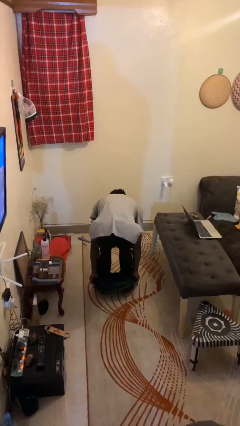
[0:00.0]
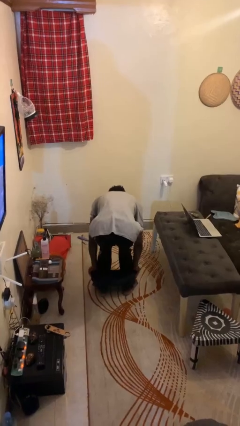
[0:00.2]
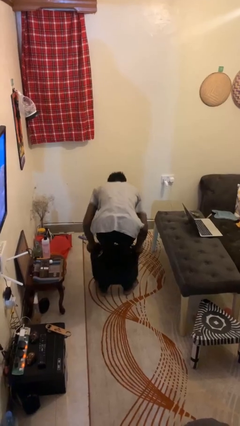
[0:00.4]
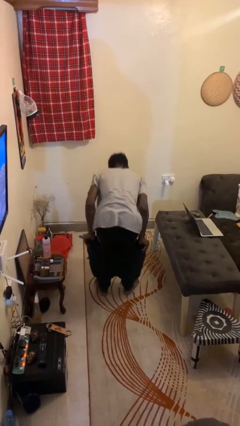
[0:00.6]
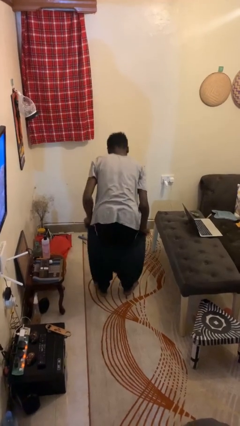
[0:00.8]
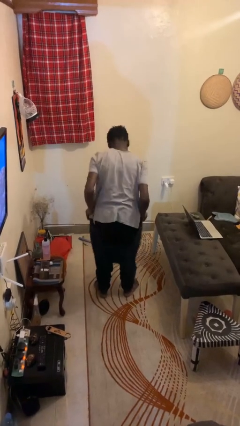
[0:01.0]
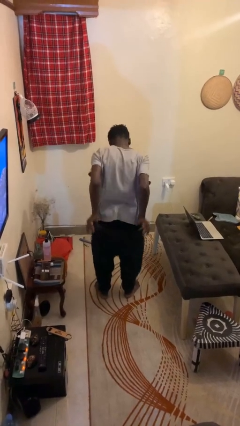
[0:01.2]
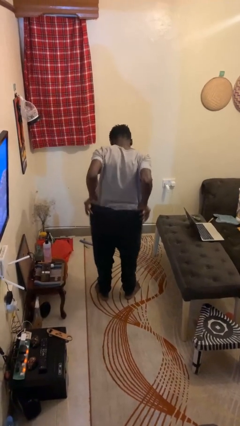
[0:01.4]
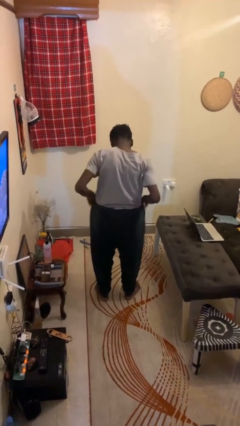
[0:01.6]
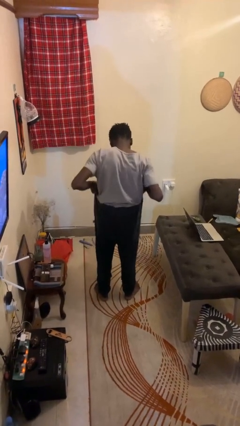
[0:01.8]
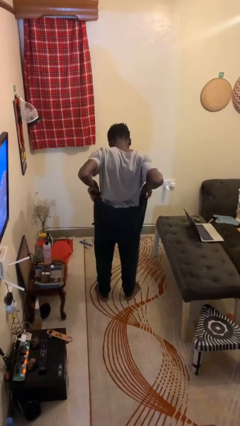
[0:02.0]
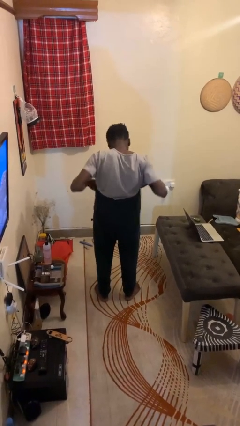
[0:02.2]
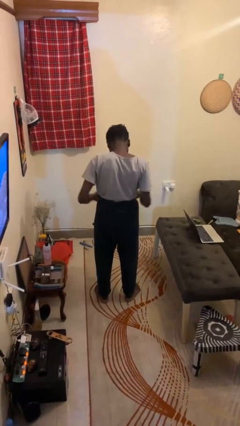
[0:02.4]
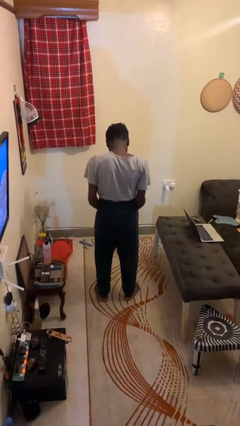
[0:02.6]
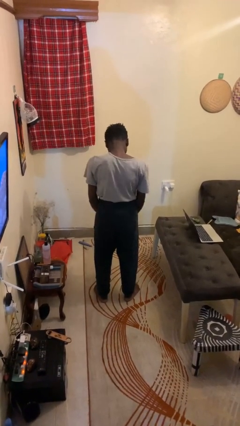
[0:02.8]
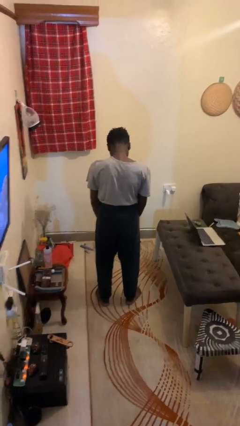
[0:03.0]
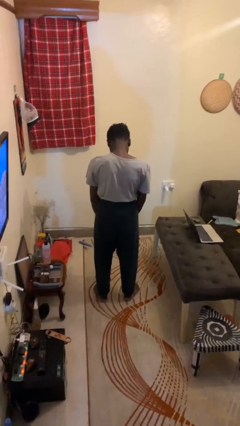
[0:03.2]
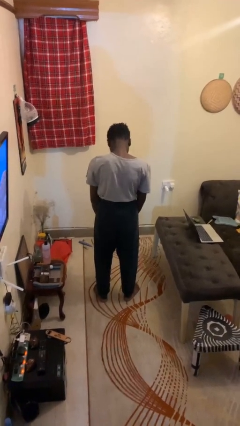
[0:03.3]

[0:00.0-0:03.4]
person puts on pants

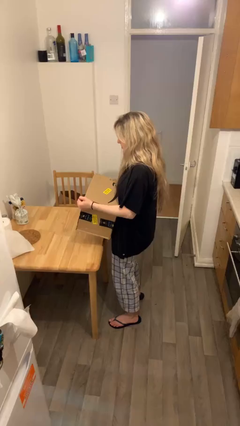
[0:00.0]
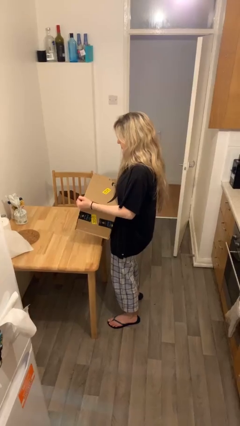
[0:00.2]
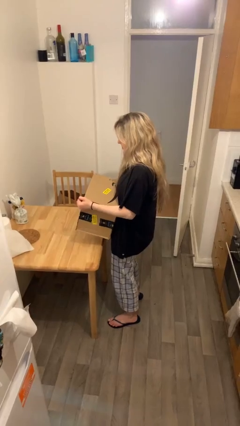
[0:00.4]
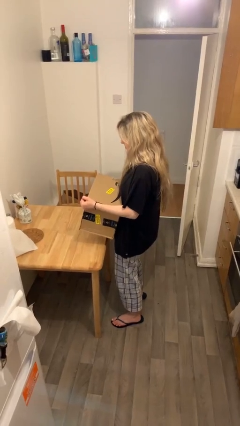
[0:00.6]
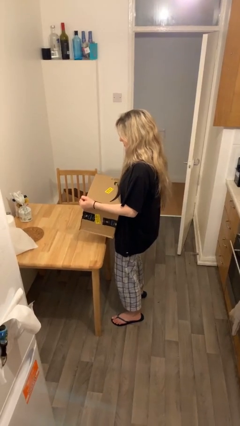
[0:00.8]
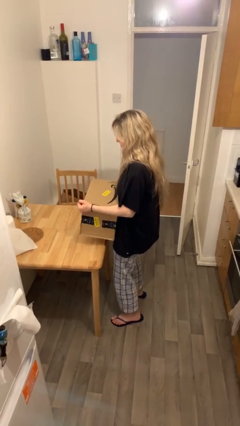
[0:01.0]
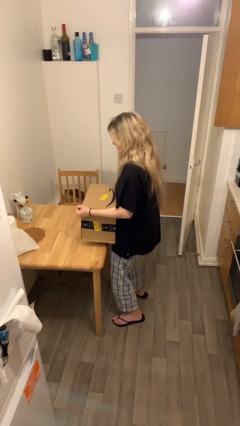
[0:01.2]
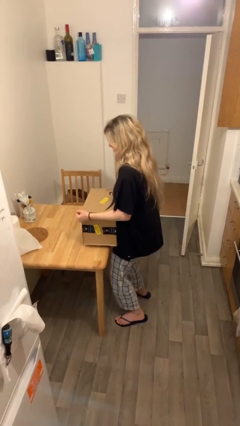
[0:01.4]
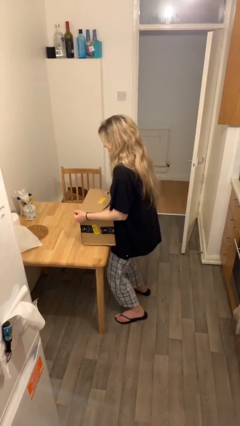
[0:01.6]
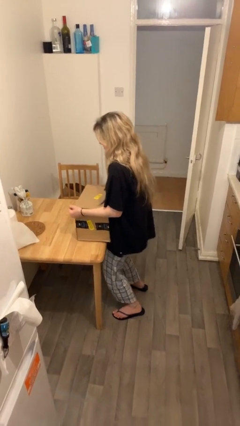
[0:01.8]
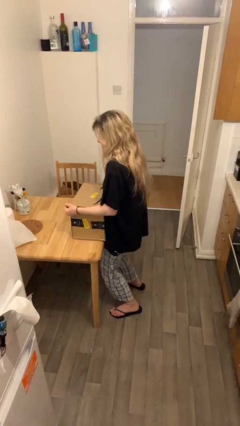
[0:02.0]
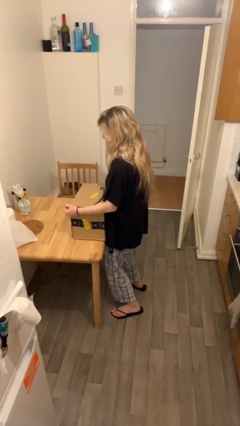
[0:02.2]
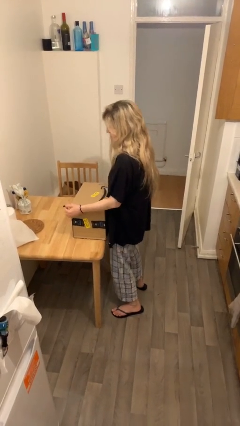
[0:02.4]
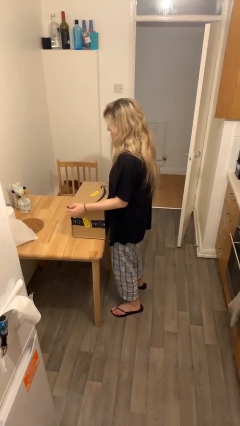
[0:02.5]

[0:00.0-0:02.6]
person puts down object on table

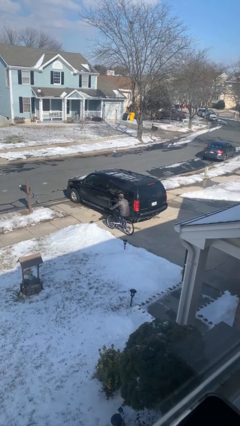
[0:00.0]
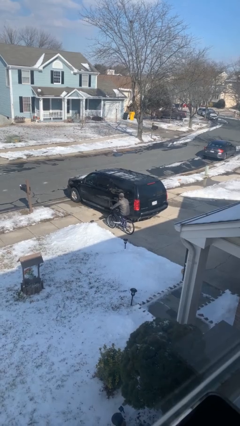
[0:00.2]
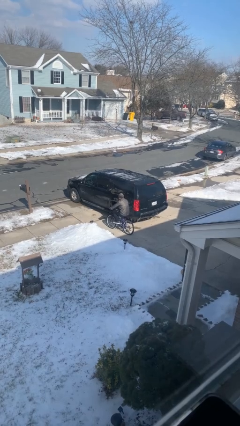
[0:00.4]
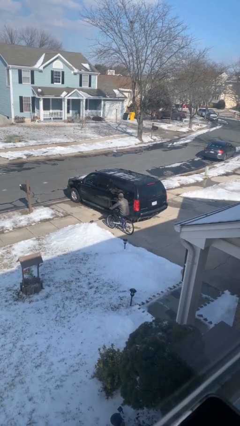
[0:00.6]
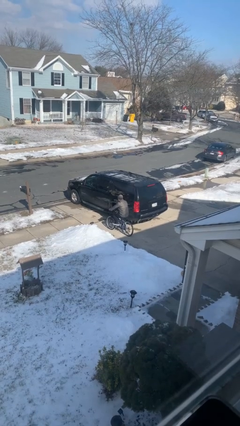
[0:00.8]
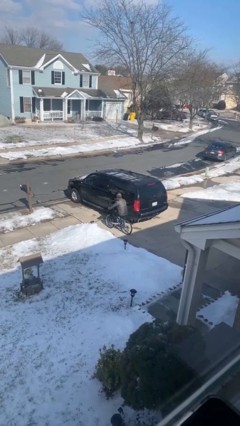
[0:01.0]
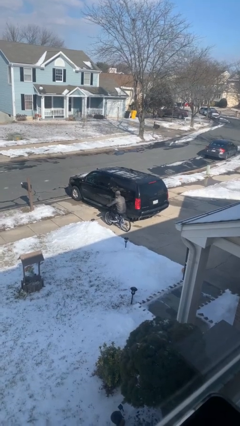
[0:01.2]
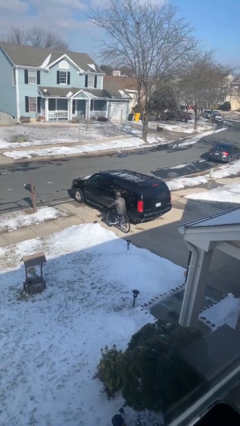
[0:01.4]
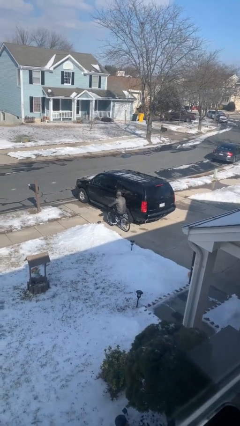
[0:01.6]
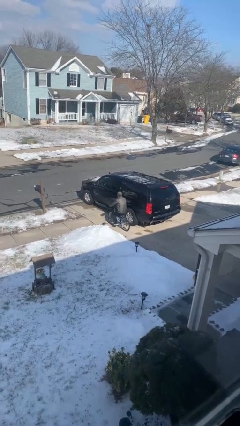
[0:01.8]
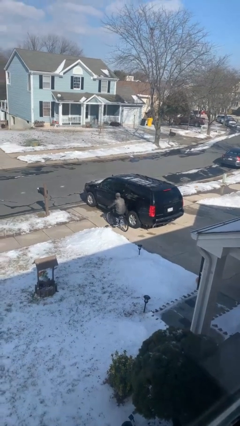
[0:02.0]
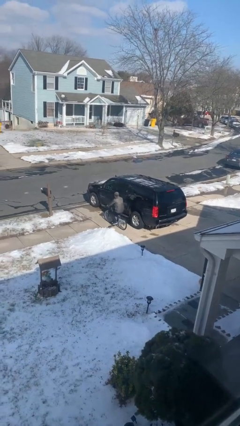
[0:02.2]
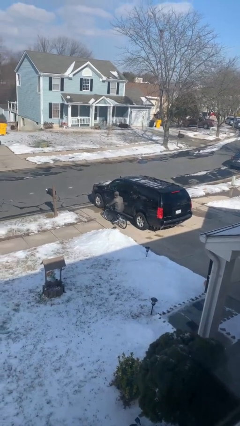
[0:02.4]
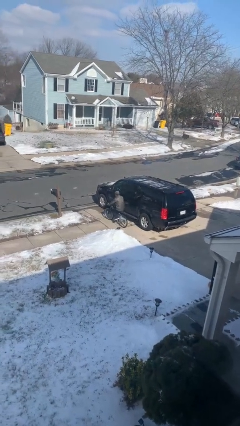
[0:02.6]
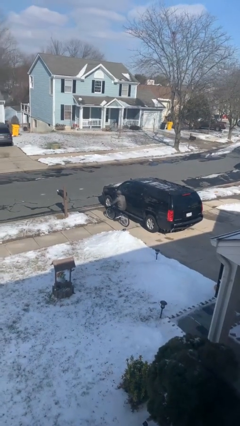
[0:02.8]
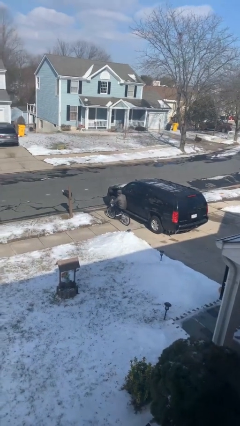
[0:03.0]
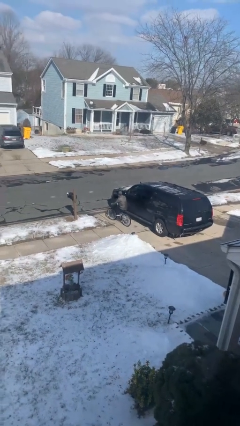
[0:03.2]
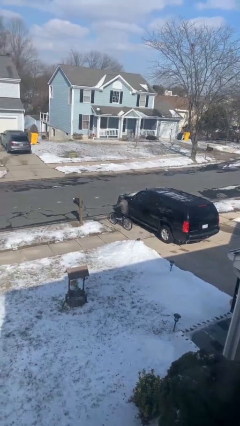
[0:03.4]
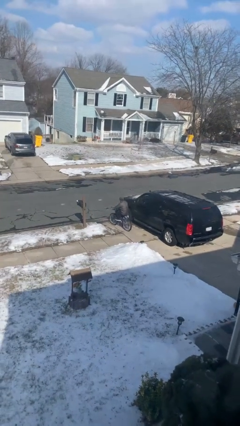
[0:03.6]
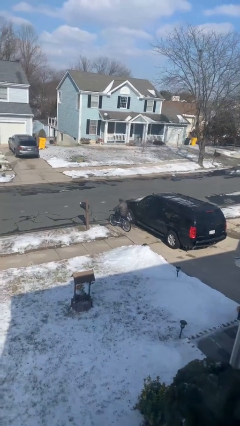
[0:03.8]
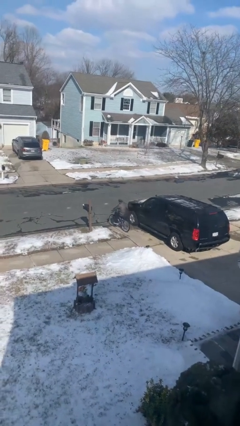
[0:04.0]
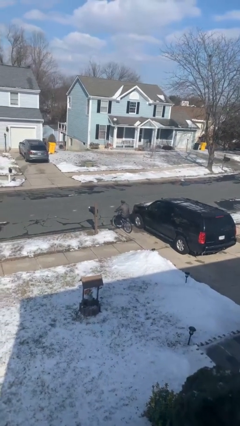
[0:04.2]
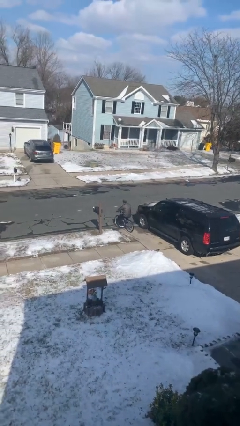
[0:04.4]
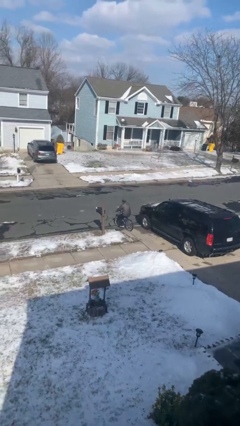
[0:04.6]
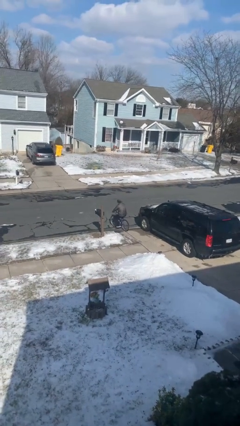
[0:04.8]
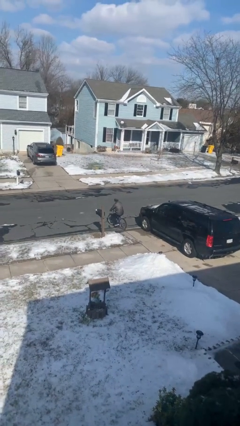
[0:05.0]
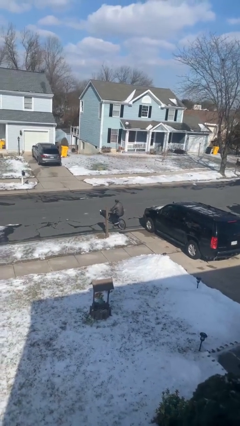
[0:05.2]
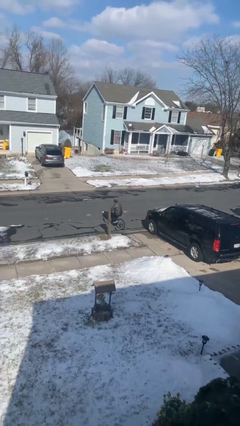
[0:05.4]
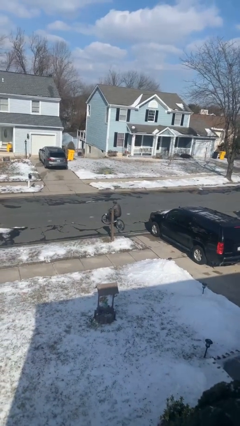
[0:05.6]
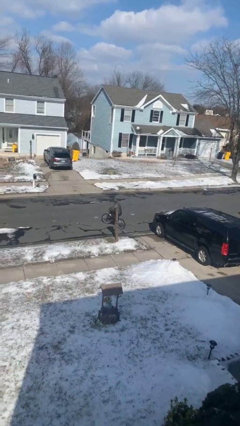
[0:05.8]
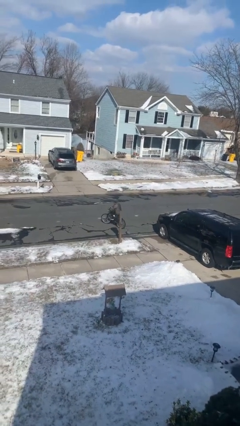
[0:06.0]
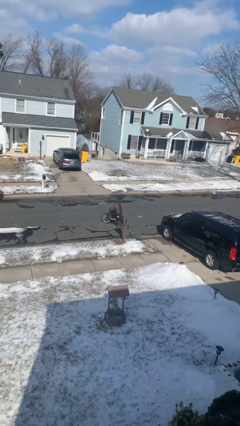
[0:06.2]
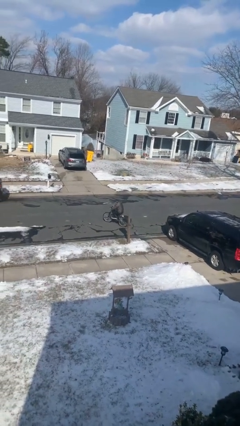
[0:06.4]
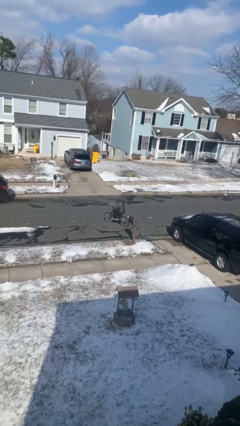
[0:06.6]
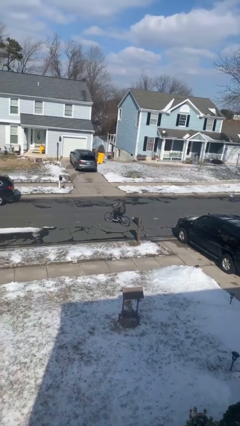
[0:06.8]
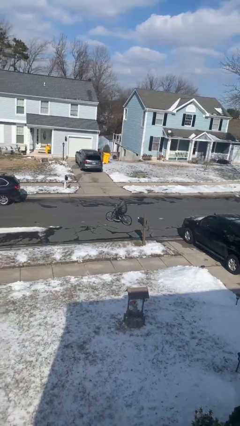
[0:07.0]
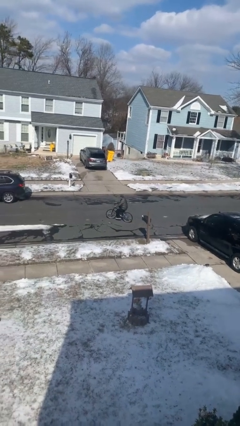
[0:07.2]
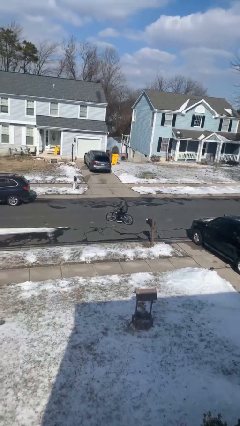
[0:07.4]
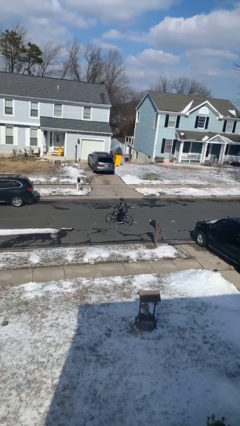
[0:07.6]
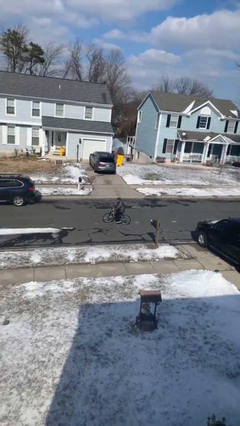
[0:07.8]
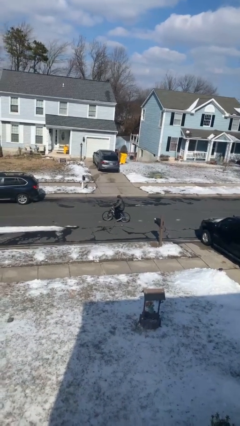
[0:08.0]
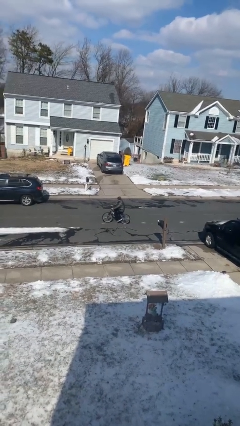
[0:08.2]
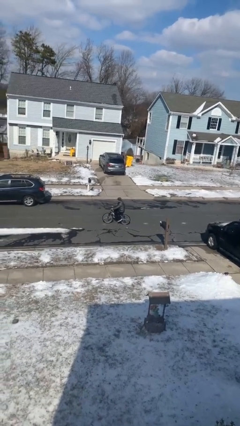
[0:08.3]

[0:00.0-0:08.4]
person rides bicycle

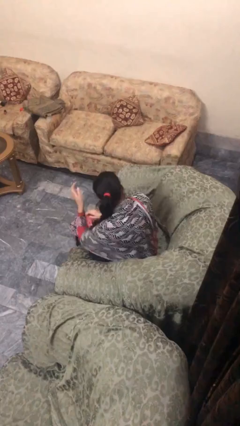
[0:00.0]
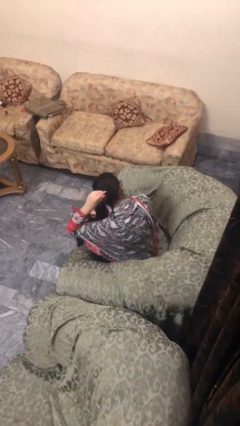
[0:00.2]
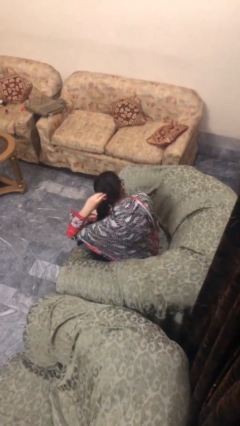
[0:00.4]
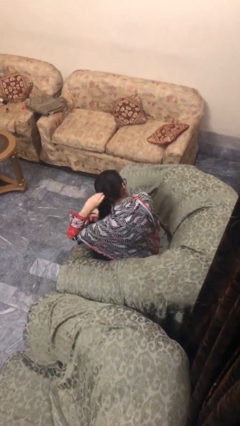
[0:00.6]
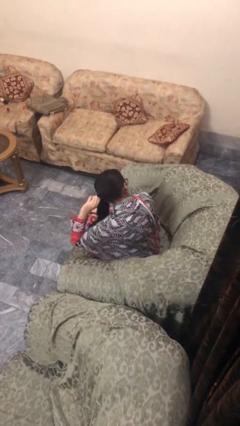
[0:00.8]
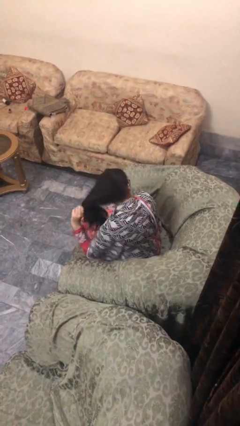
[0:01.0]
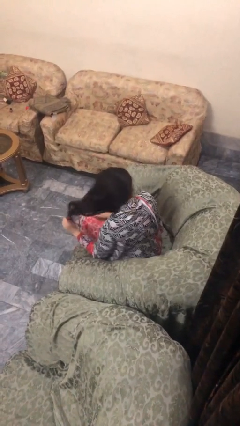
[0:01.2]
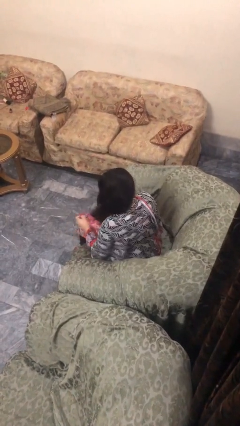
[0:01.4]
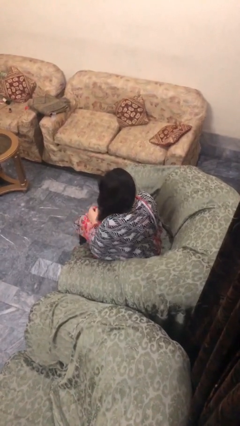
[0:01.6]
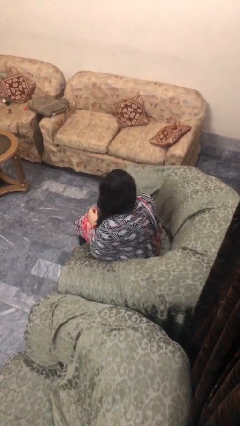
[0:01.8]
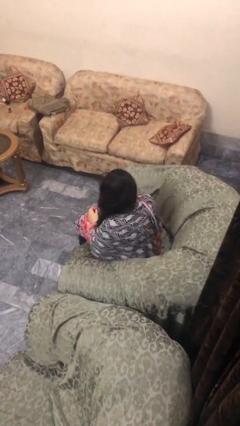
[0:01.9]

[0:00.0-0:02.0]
person takes off hairtie

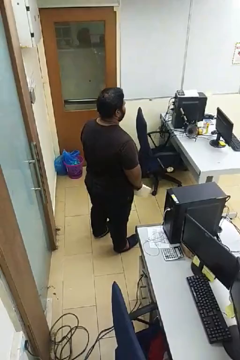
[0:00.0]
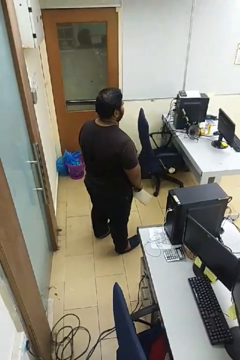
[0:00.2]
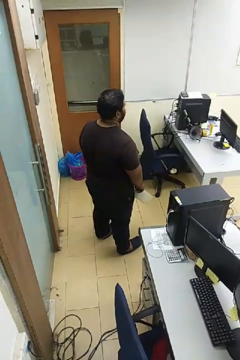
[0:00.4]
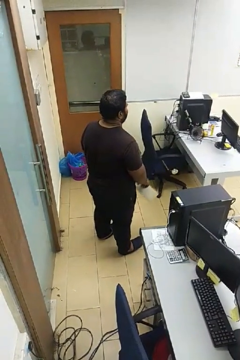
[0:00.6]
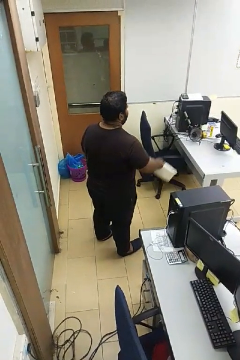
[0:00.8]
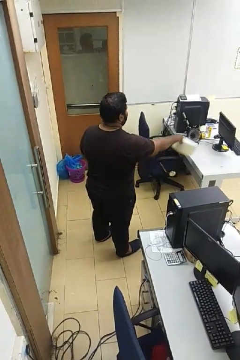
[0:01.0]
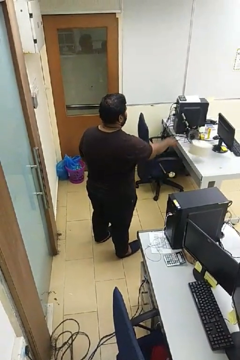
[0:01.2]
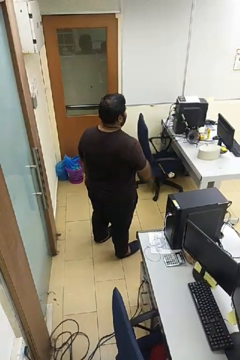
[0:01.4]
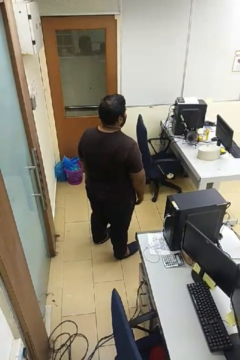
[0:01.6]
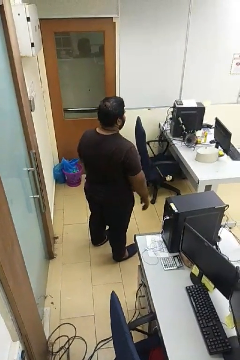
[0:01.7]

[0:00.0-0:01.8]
person throws object on table
